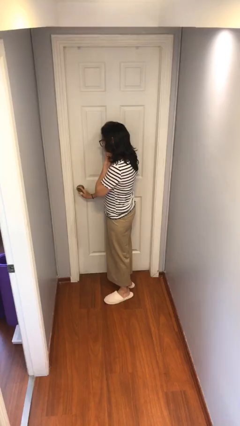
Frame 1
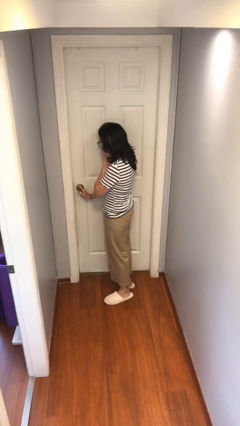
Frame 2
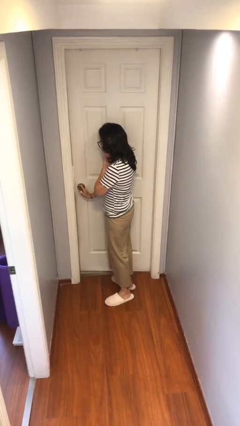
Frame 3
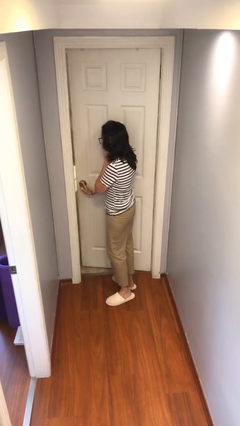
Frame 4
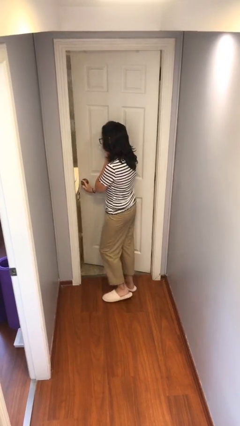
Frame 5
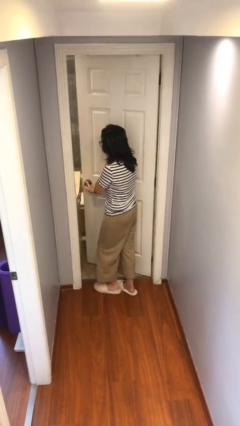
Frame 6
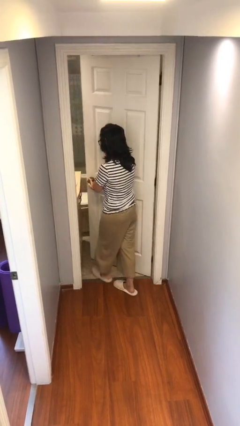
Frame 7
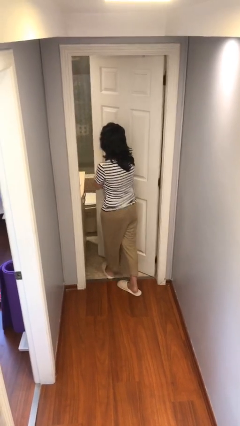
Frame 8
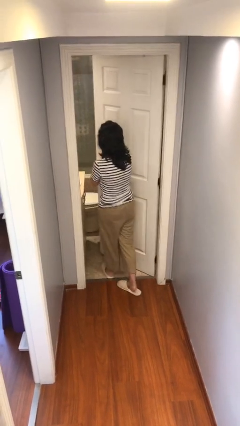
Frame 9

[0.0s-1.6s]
person opens facility door

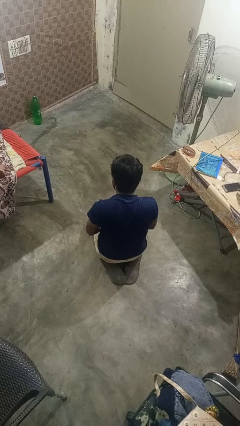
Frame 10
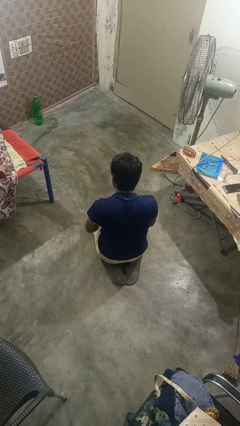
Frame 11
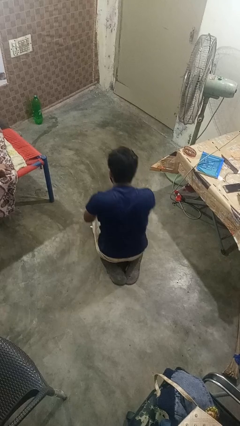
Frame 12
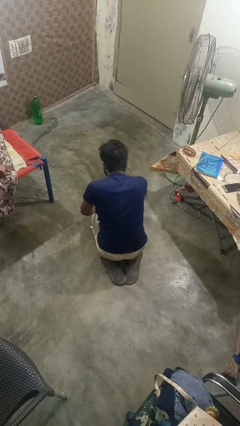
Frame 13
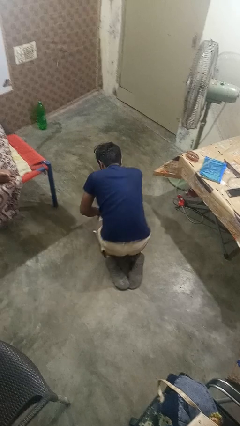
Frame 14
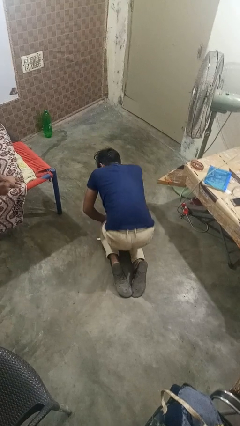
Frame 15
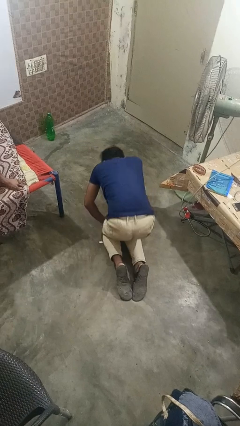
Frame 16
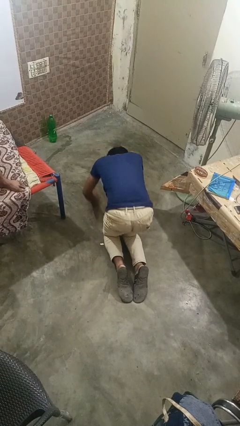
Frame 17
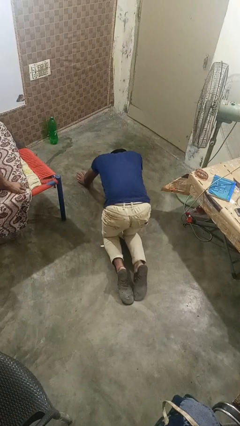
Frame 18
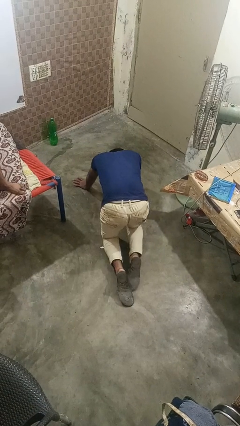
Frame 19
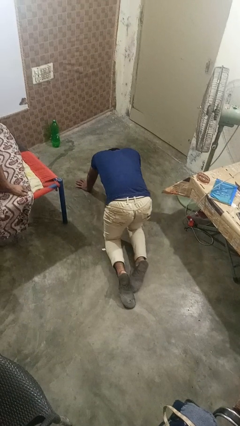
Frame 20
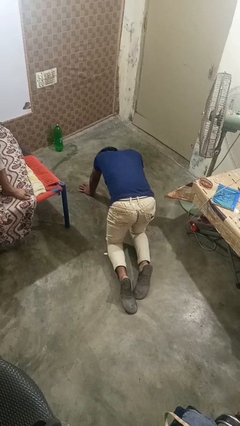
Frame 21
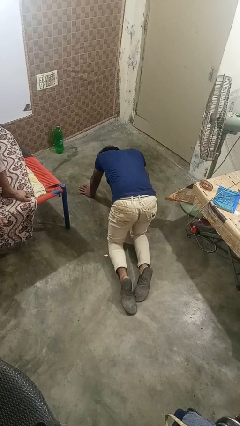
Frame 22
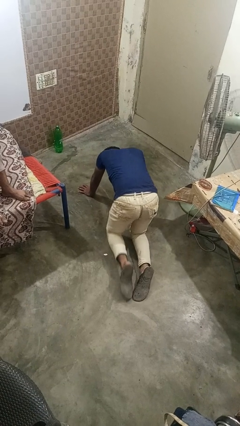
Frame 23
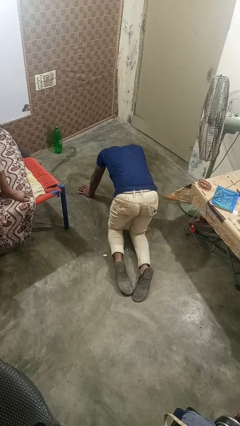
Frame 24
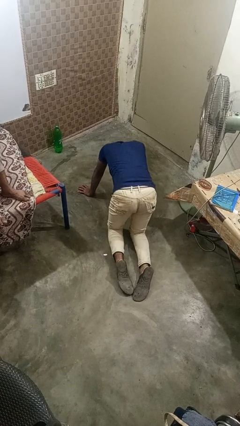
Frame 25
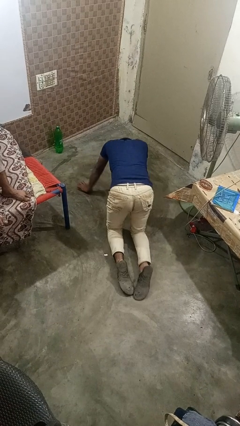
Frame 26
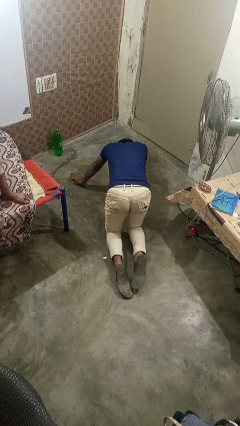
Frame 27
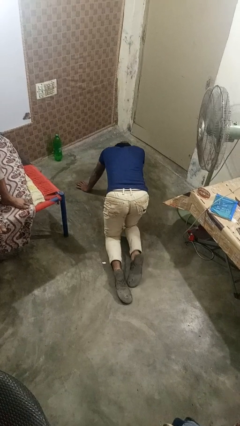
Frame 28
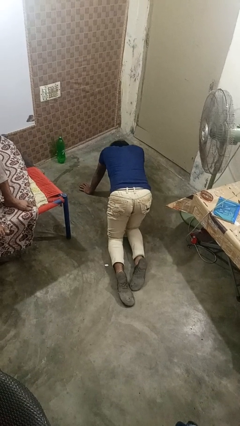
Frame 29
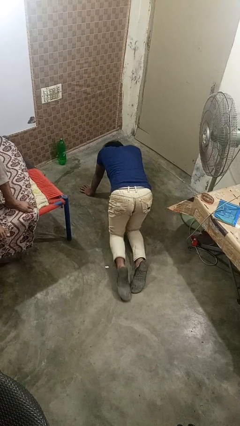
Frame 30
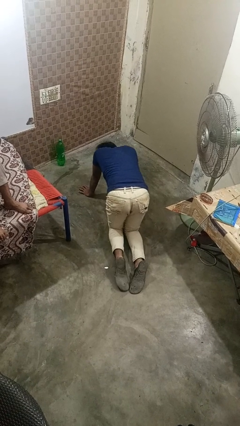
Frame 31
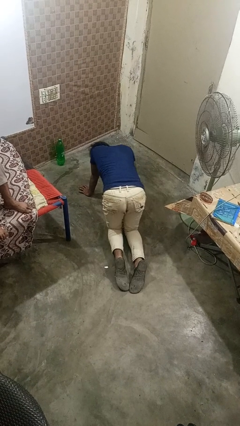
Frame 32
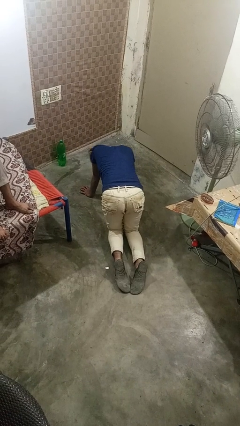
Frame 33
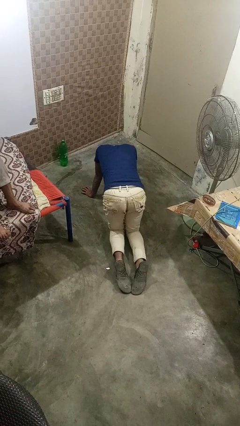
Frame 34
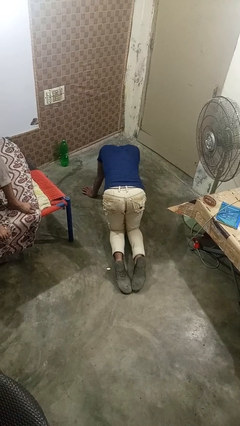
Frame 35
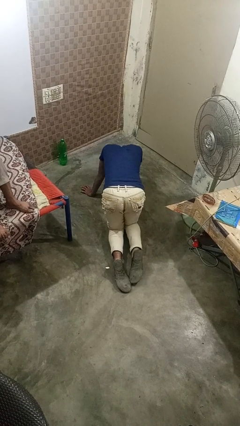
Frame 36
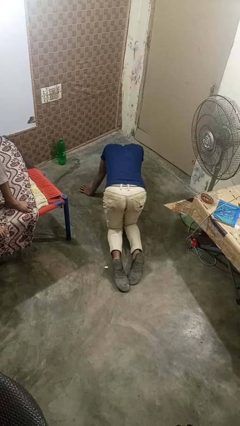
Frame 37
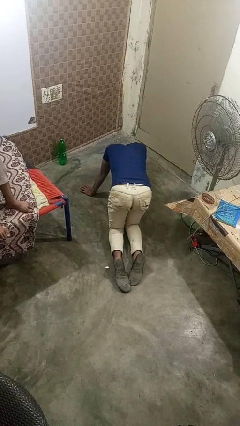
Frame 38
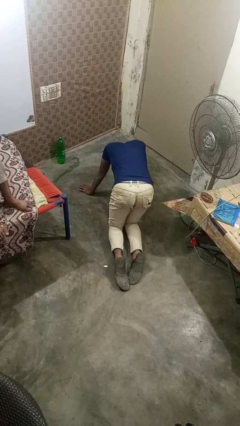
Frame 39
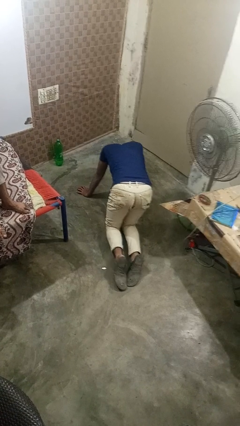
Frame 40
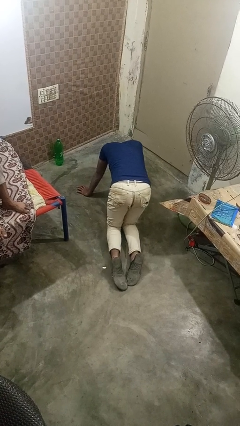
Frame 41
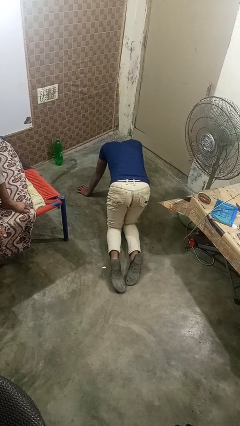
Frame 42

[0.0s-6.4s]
person crawls

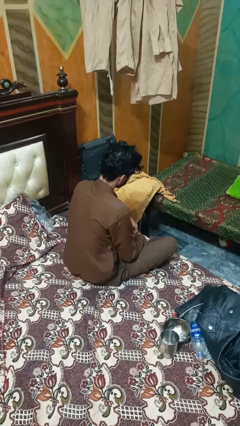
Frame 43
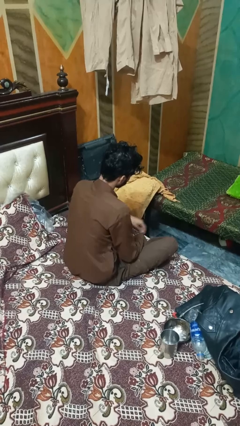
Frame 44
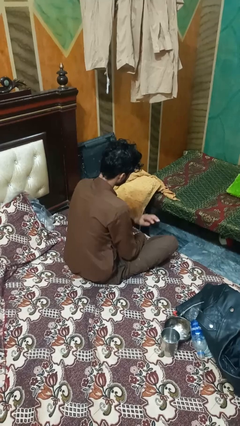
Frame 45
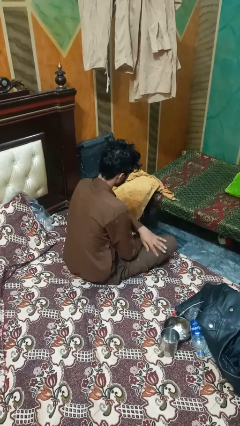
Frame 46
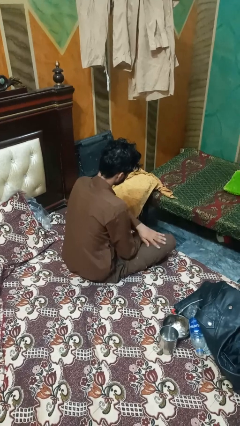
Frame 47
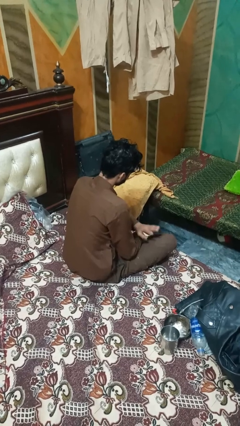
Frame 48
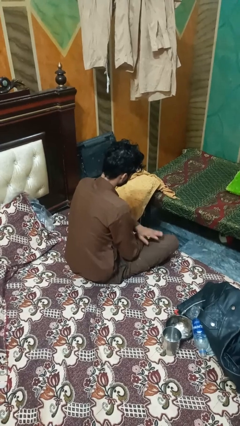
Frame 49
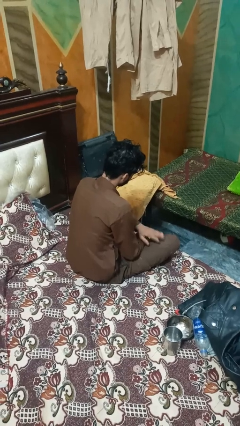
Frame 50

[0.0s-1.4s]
person slaps hands on thighs

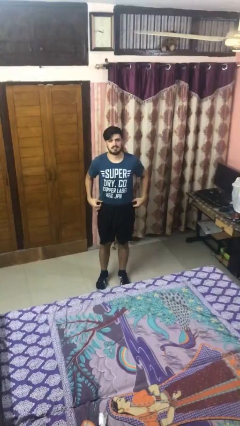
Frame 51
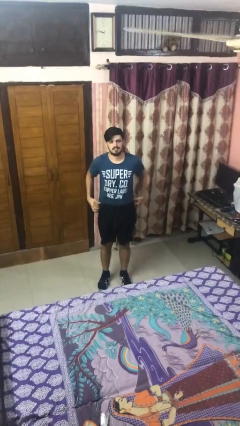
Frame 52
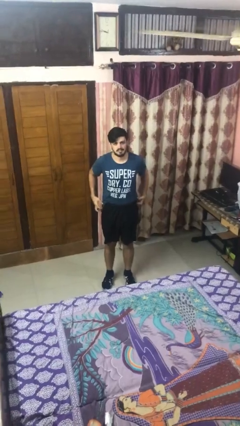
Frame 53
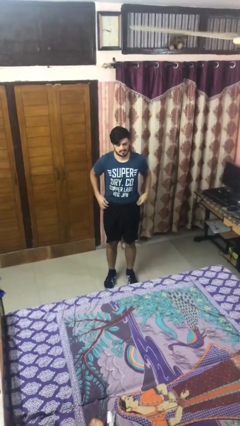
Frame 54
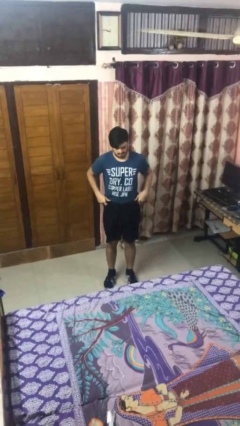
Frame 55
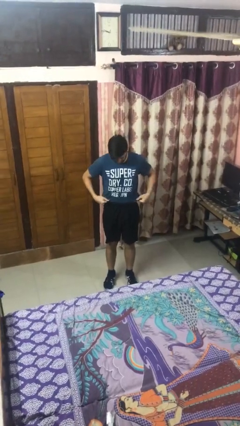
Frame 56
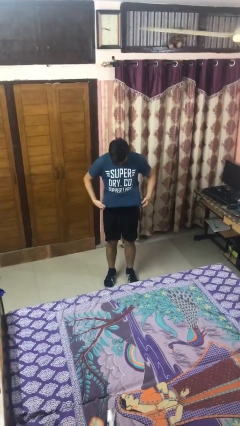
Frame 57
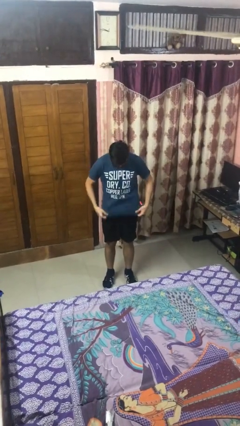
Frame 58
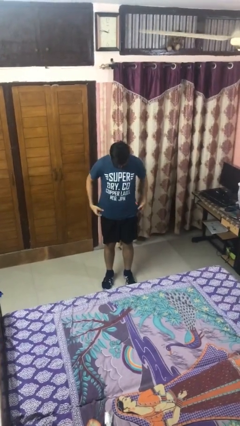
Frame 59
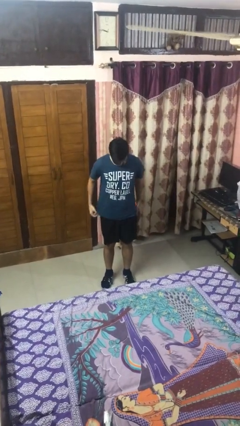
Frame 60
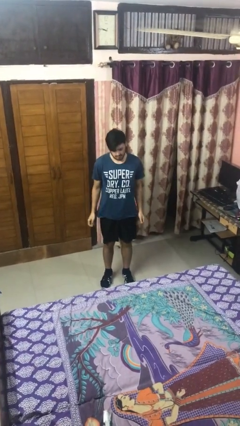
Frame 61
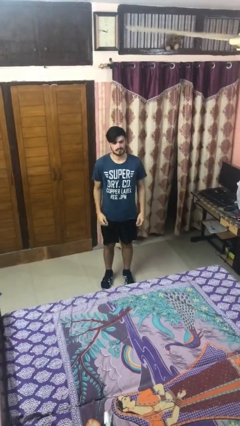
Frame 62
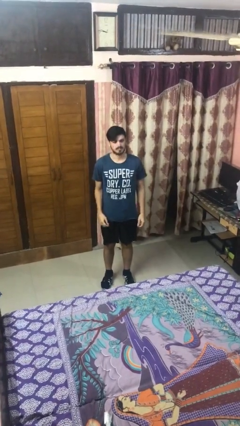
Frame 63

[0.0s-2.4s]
person untucks shirt

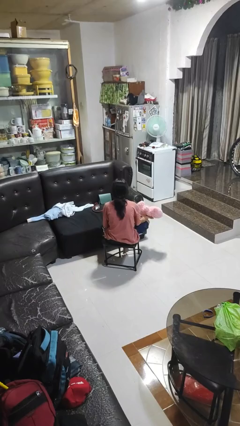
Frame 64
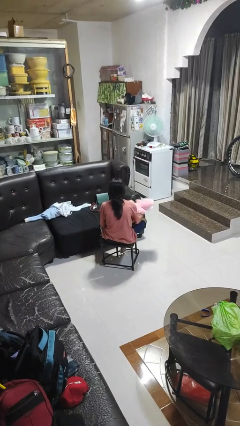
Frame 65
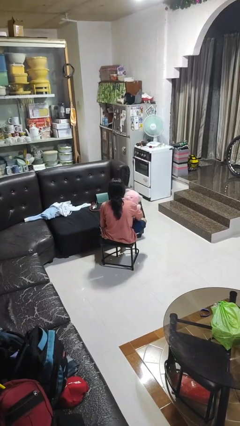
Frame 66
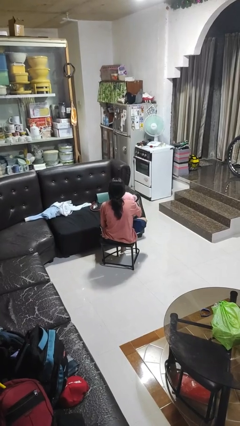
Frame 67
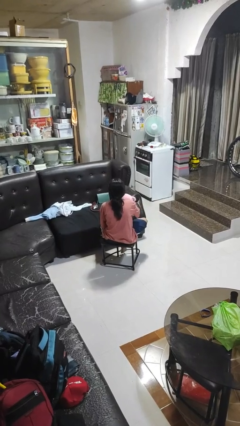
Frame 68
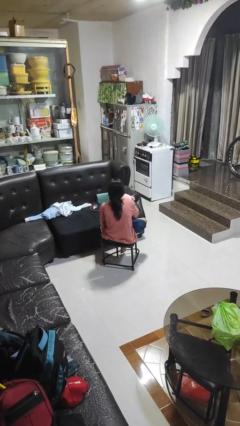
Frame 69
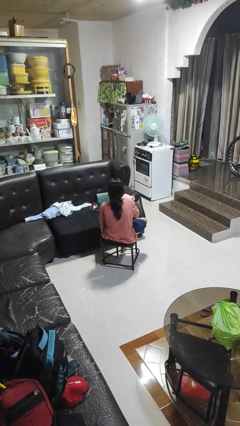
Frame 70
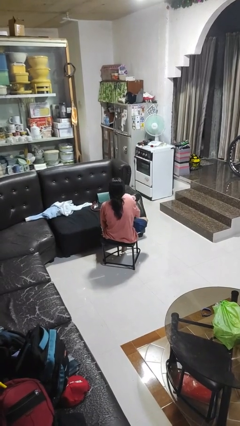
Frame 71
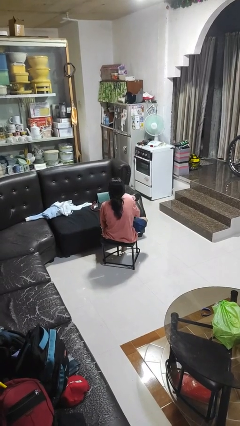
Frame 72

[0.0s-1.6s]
person hugs stuffed animal

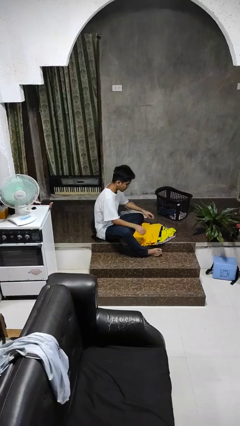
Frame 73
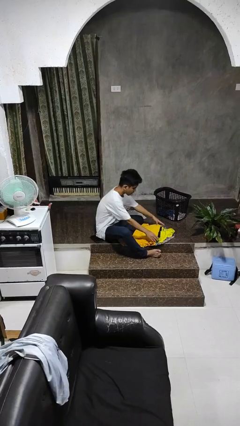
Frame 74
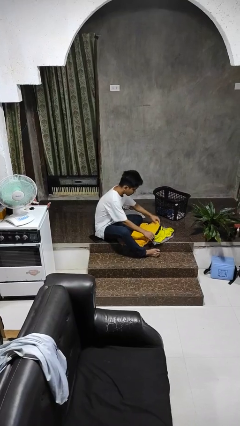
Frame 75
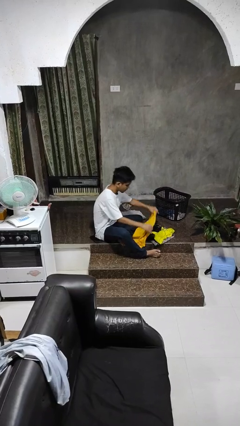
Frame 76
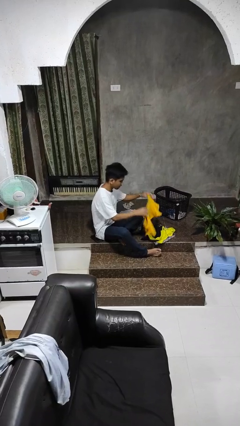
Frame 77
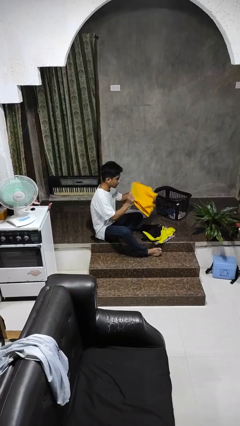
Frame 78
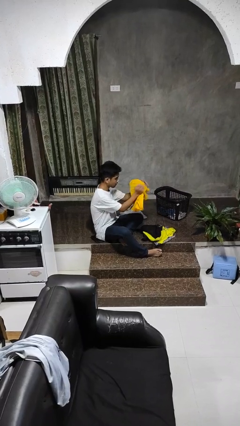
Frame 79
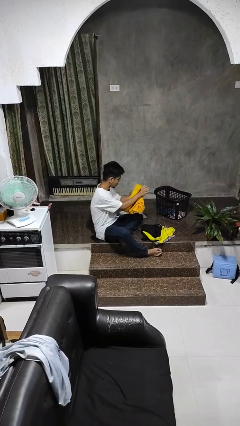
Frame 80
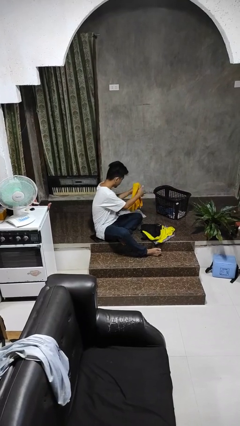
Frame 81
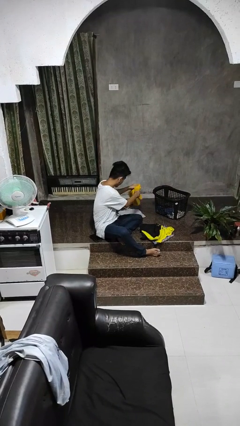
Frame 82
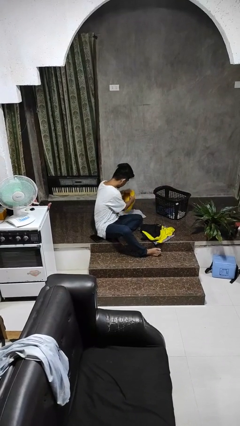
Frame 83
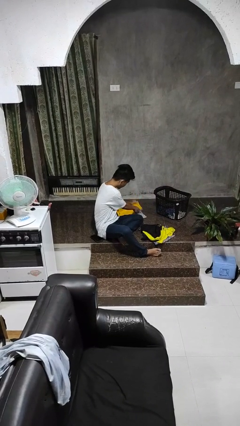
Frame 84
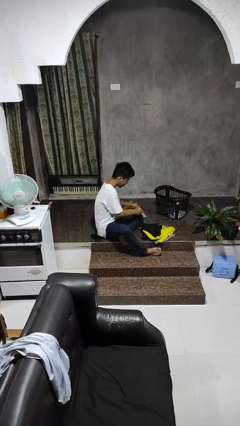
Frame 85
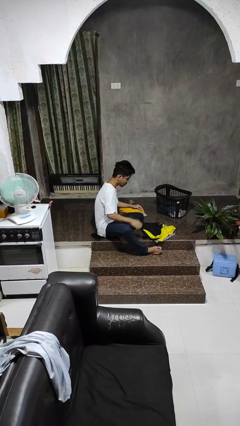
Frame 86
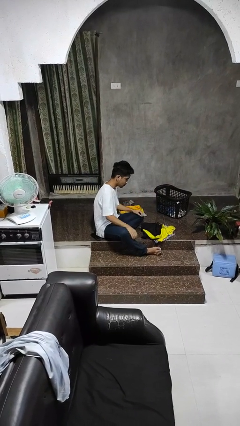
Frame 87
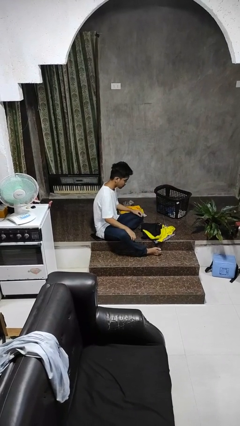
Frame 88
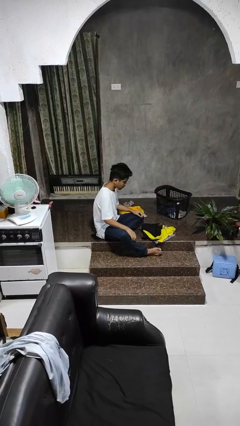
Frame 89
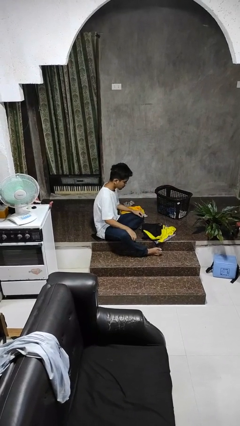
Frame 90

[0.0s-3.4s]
person folds shirt

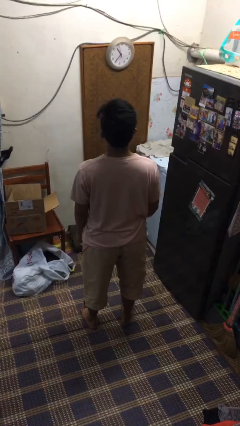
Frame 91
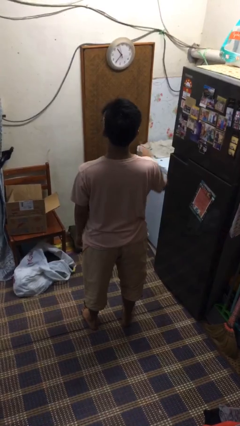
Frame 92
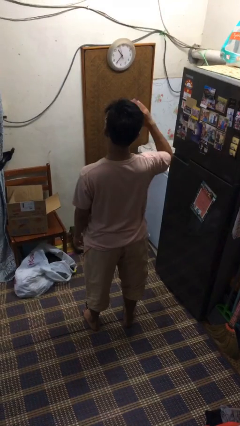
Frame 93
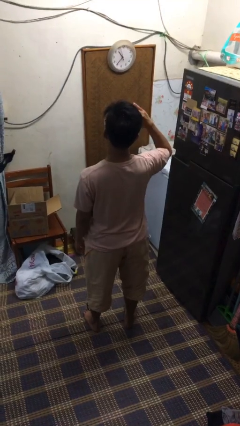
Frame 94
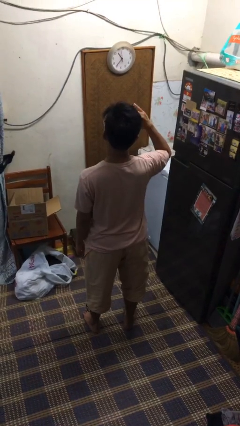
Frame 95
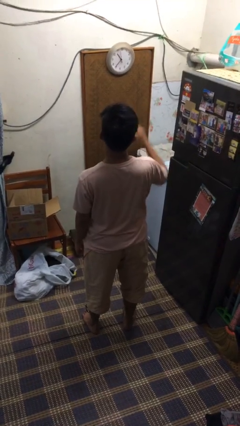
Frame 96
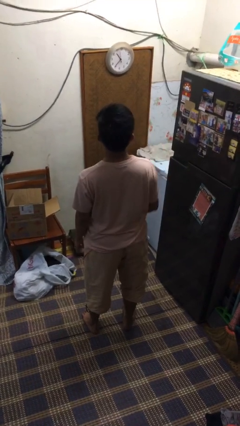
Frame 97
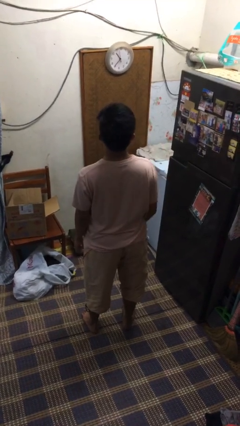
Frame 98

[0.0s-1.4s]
person salutes
